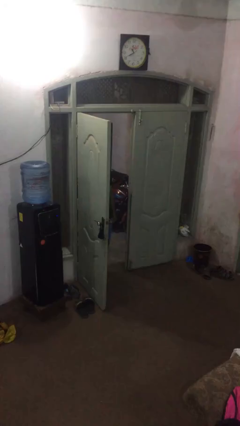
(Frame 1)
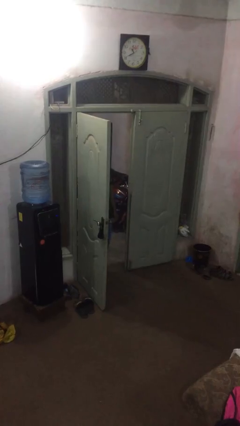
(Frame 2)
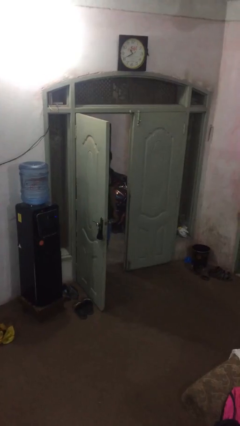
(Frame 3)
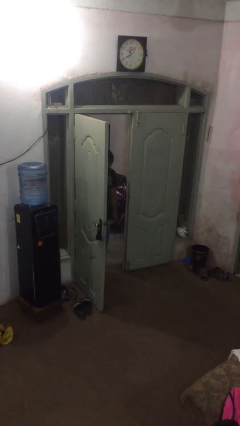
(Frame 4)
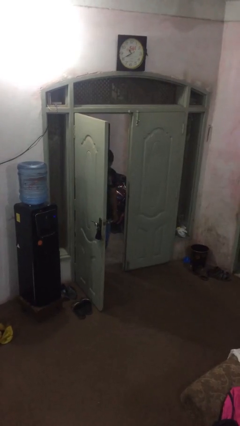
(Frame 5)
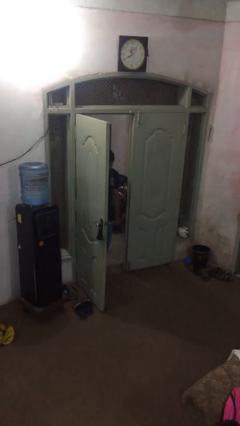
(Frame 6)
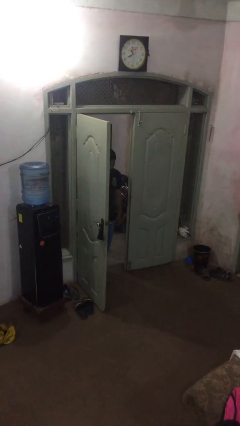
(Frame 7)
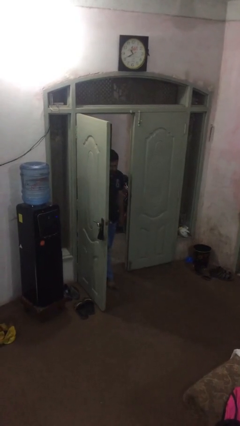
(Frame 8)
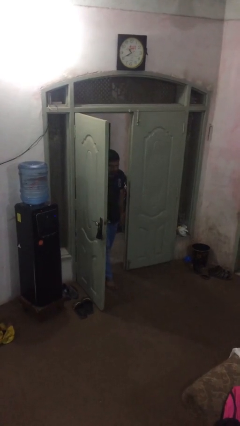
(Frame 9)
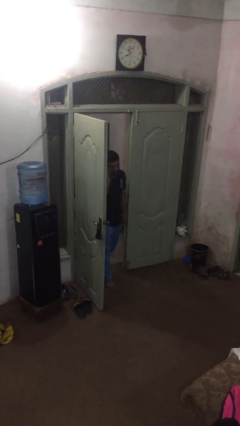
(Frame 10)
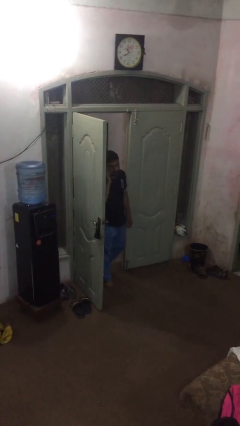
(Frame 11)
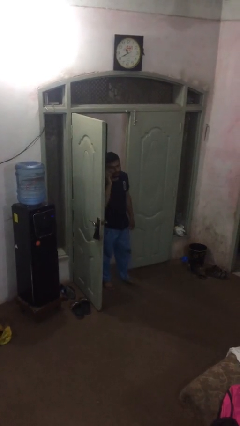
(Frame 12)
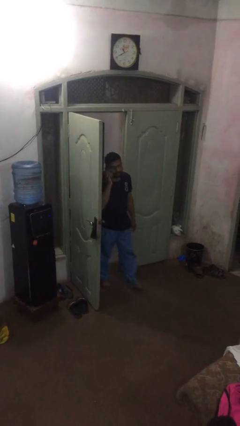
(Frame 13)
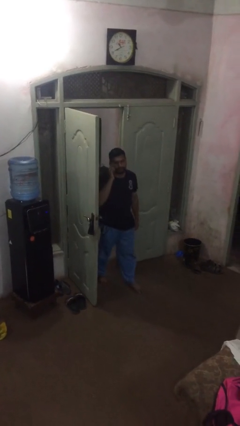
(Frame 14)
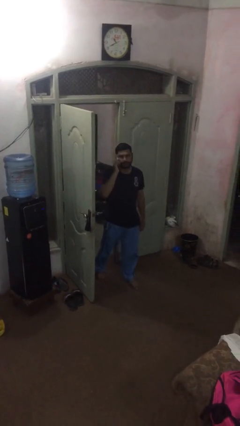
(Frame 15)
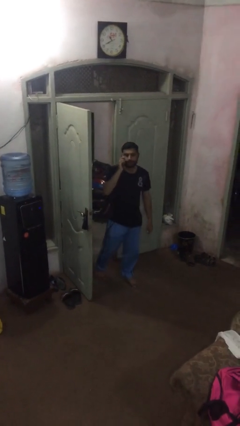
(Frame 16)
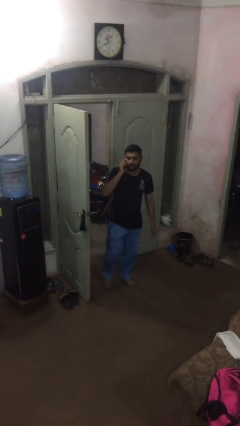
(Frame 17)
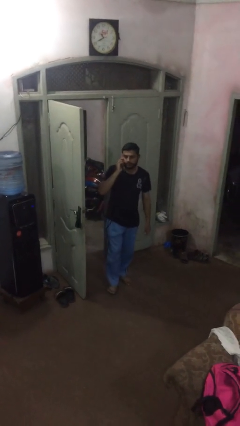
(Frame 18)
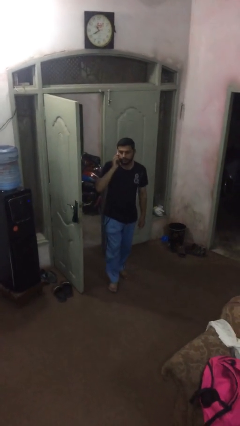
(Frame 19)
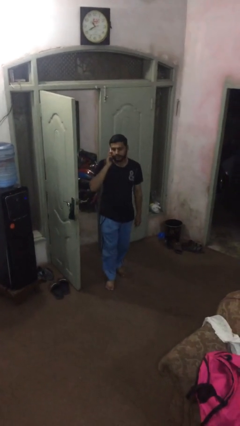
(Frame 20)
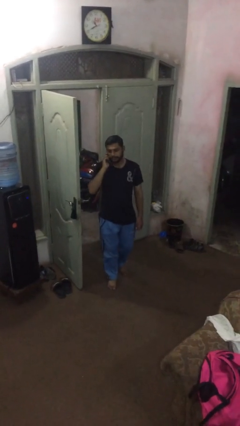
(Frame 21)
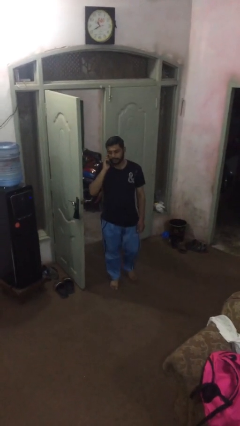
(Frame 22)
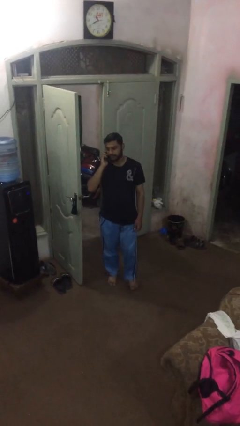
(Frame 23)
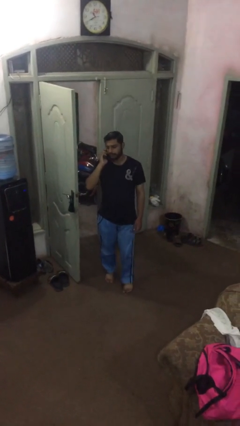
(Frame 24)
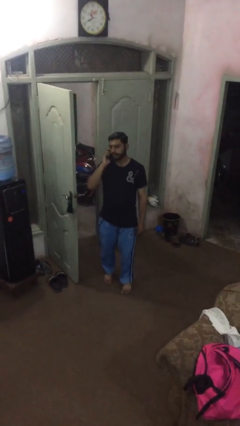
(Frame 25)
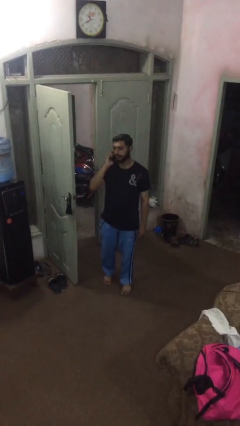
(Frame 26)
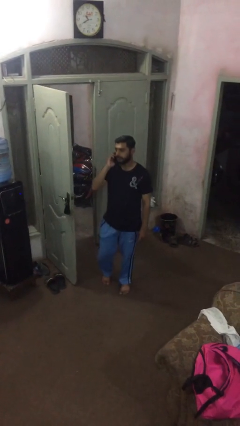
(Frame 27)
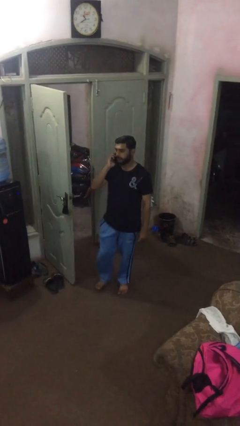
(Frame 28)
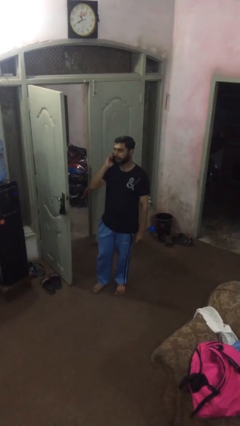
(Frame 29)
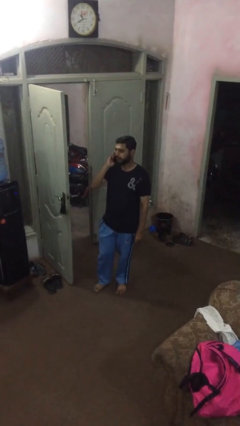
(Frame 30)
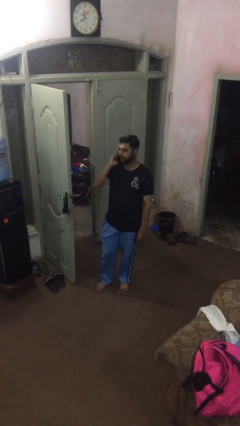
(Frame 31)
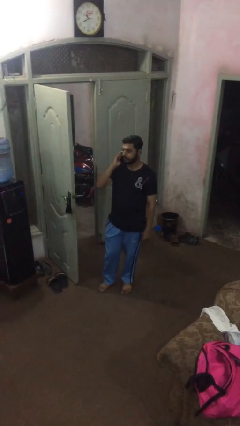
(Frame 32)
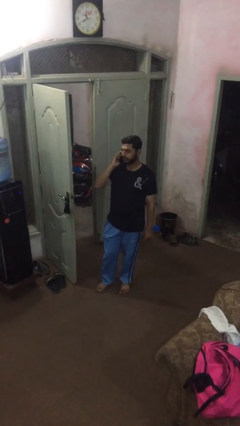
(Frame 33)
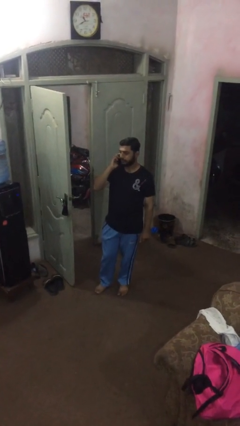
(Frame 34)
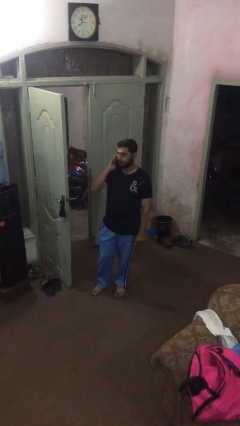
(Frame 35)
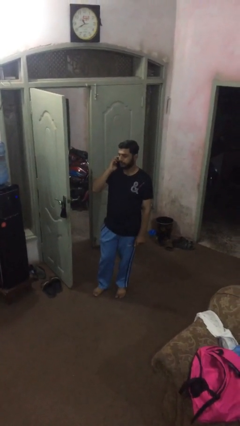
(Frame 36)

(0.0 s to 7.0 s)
person enters scene through structure

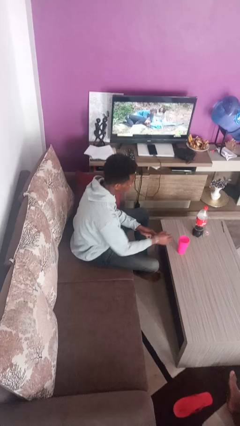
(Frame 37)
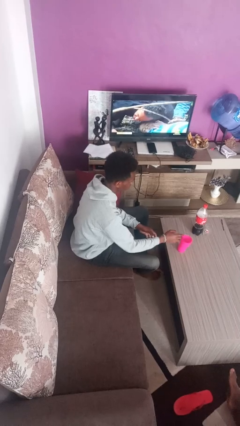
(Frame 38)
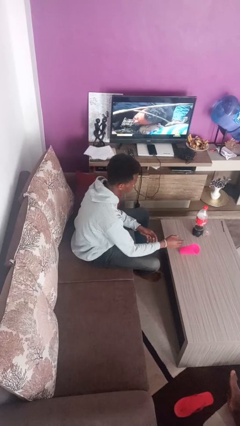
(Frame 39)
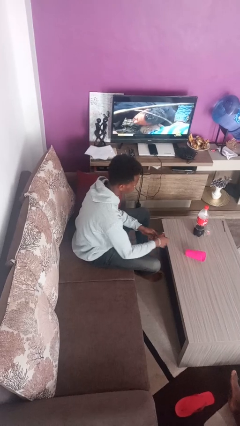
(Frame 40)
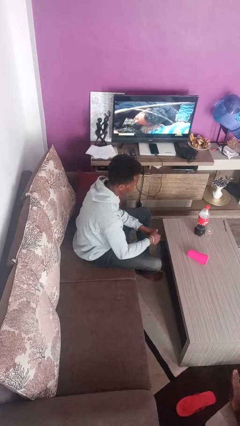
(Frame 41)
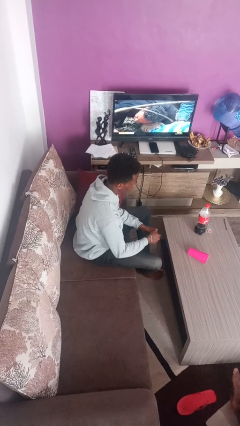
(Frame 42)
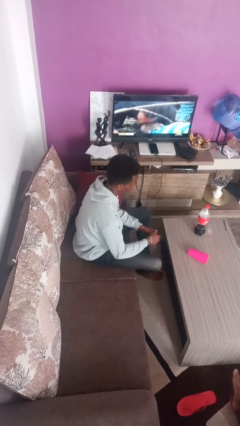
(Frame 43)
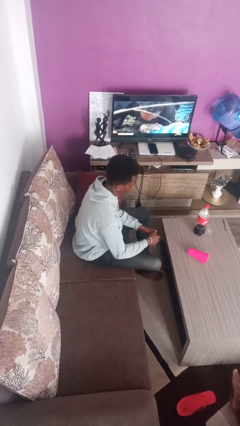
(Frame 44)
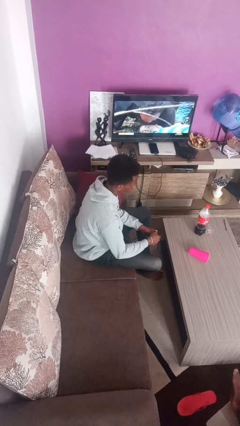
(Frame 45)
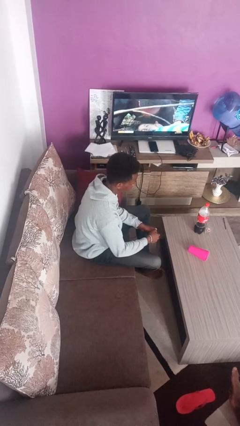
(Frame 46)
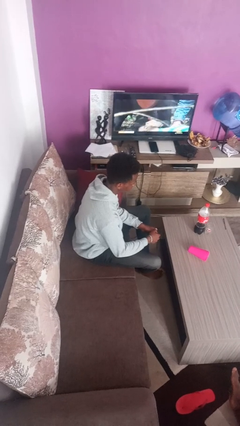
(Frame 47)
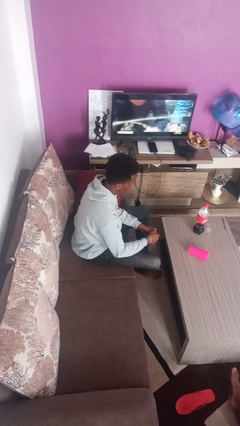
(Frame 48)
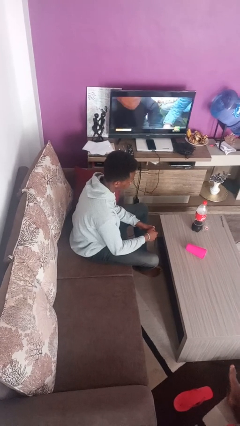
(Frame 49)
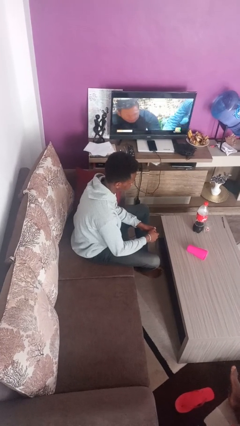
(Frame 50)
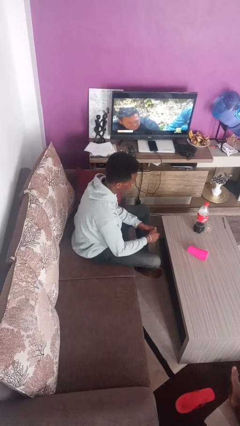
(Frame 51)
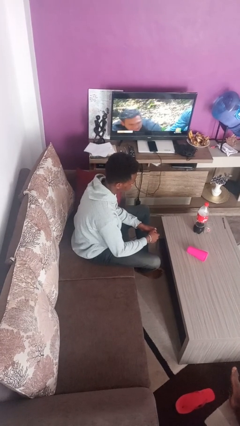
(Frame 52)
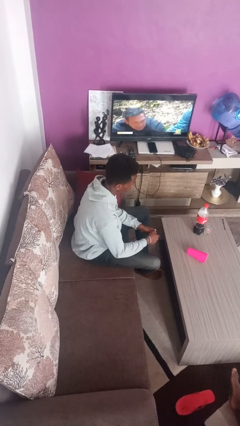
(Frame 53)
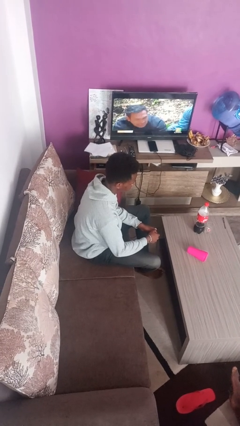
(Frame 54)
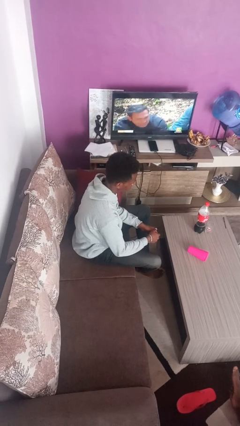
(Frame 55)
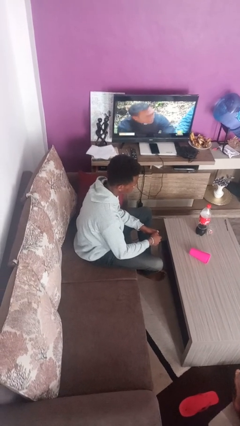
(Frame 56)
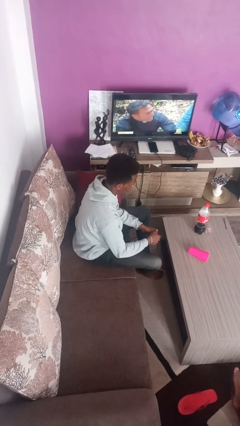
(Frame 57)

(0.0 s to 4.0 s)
person knocks over glass

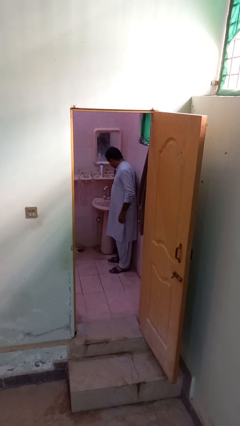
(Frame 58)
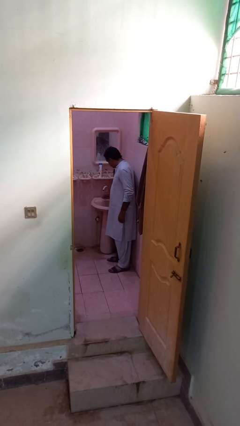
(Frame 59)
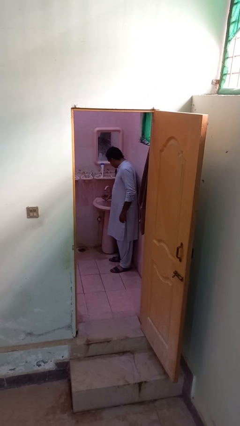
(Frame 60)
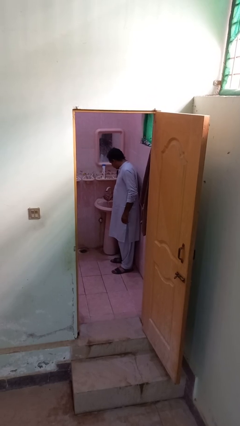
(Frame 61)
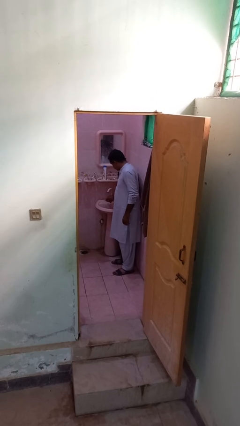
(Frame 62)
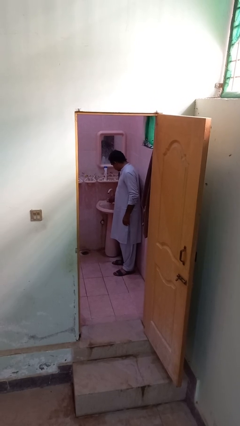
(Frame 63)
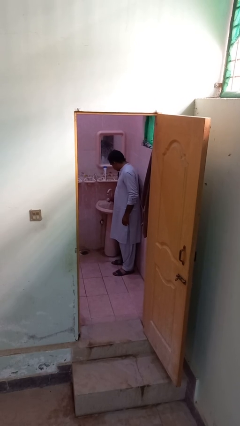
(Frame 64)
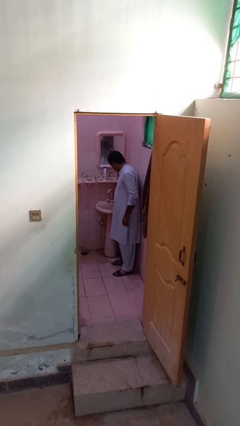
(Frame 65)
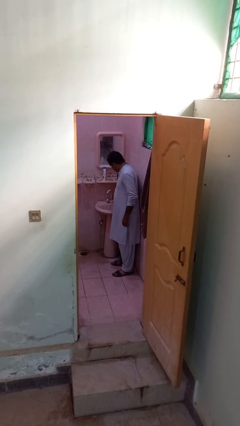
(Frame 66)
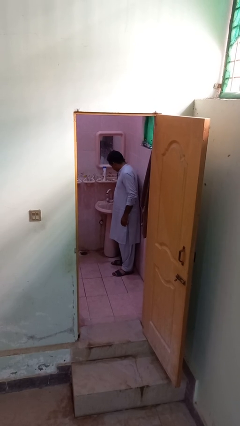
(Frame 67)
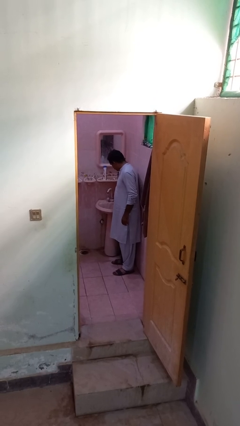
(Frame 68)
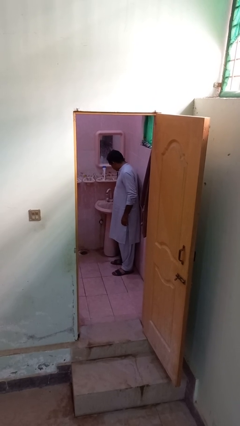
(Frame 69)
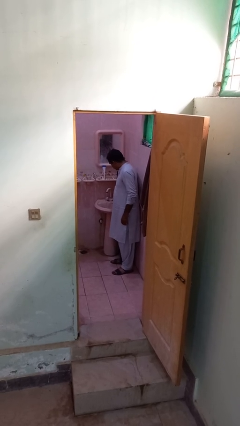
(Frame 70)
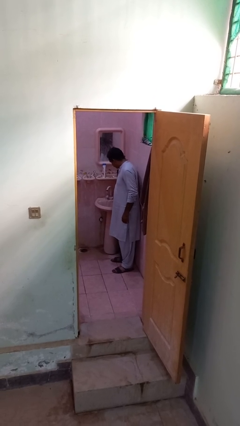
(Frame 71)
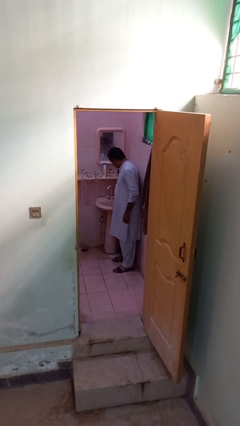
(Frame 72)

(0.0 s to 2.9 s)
person turns on faucet

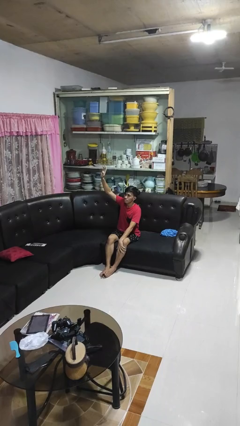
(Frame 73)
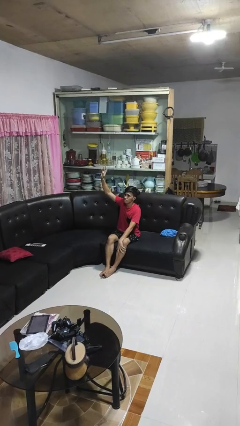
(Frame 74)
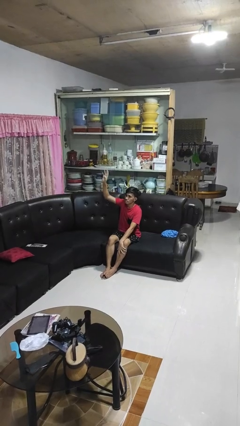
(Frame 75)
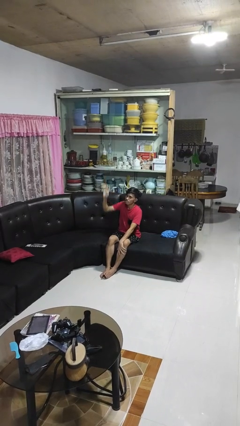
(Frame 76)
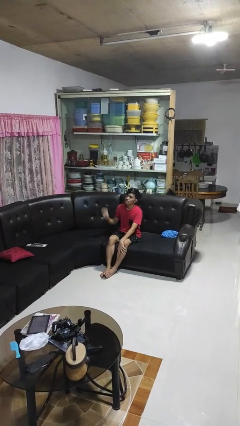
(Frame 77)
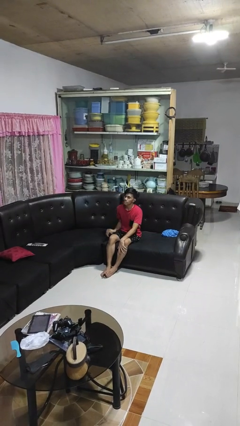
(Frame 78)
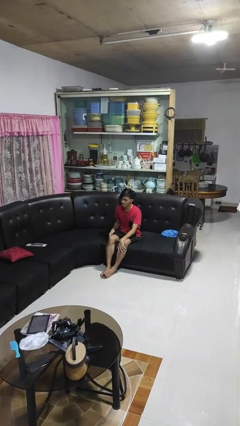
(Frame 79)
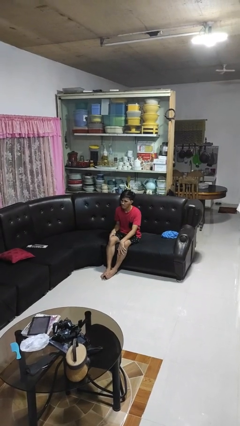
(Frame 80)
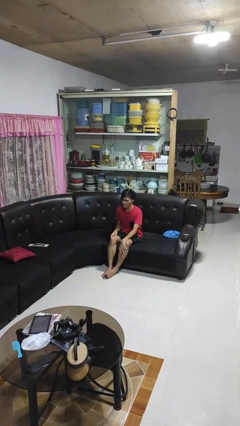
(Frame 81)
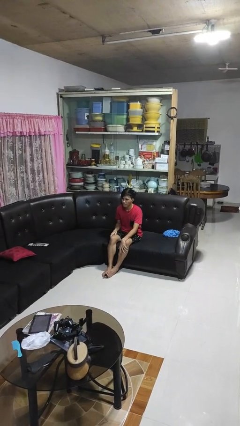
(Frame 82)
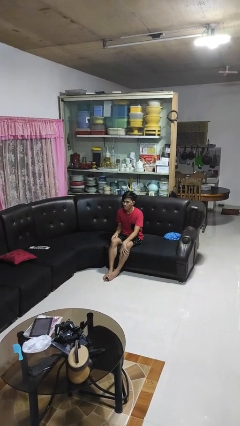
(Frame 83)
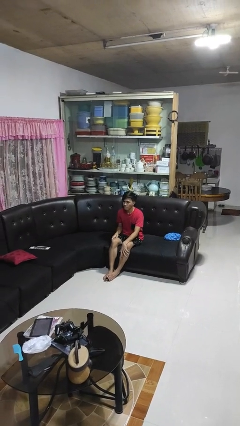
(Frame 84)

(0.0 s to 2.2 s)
person gestures lower hand

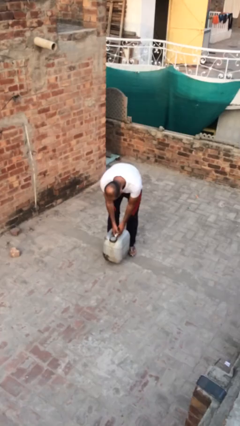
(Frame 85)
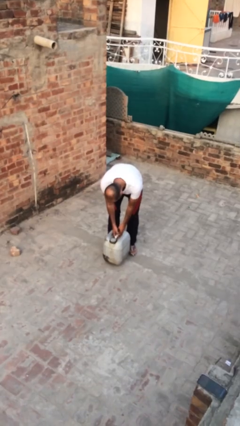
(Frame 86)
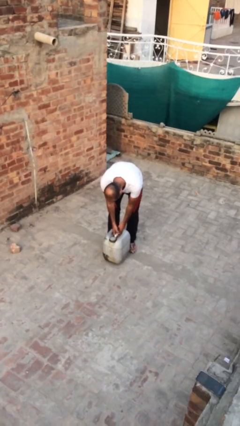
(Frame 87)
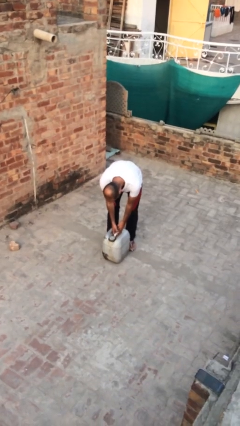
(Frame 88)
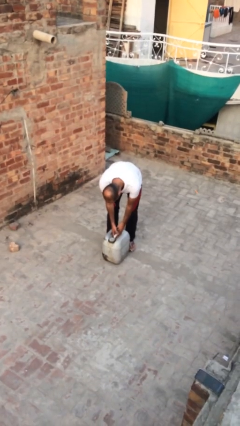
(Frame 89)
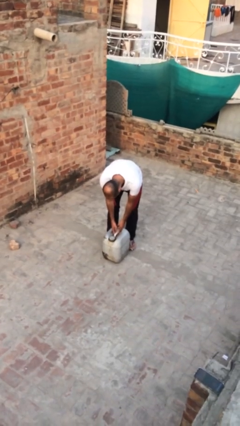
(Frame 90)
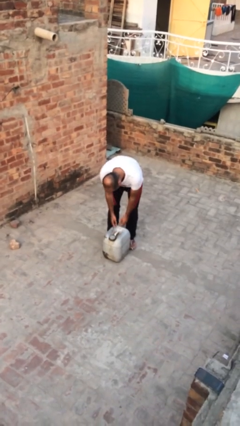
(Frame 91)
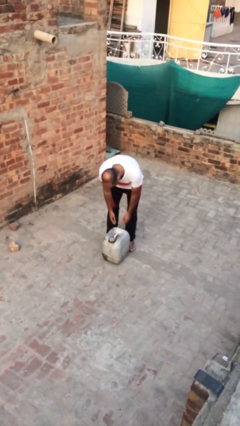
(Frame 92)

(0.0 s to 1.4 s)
person puts down object on floor
